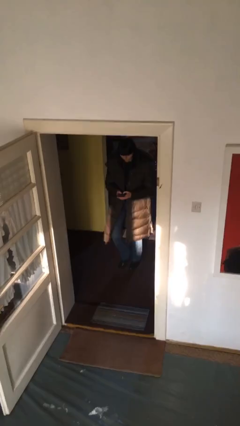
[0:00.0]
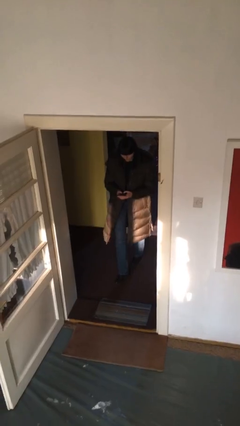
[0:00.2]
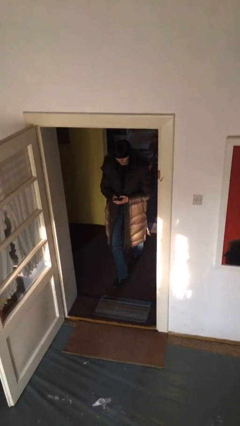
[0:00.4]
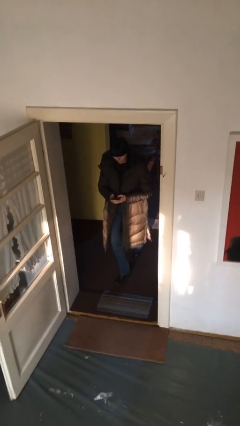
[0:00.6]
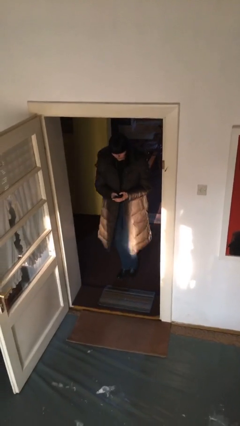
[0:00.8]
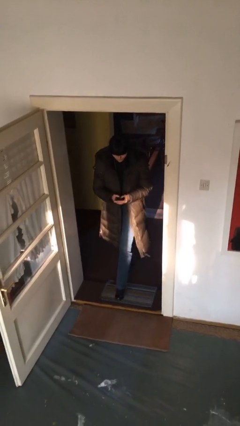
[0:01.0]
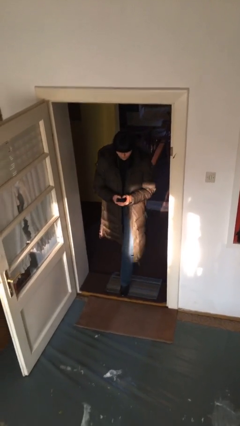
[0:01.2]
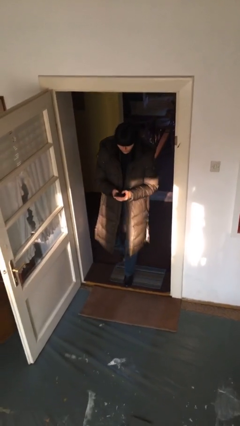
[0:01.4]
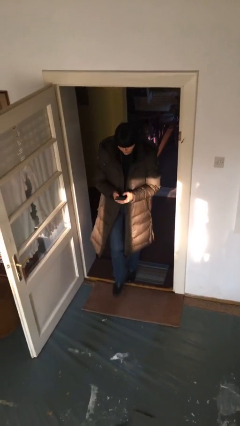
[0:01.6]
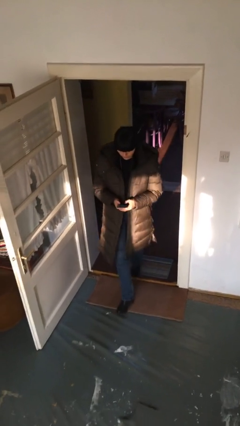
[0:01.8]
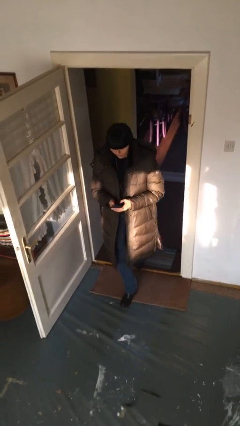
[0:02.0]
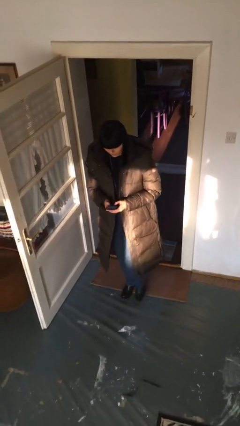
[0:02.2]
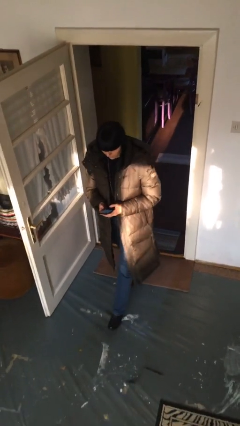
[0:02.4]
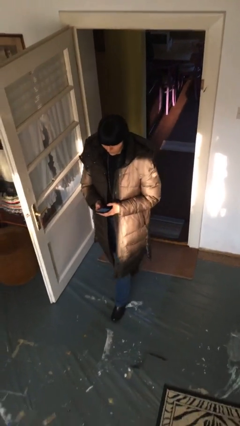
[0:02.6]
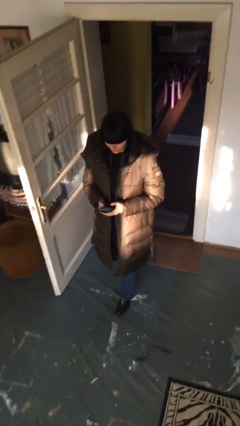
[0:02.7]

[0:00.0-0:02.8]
person enters scene through structure

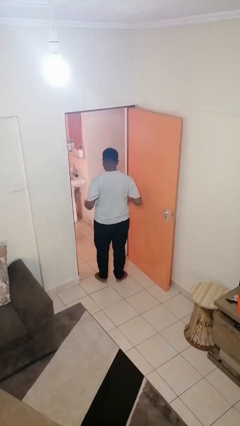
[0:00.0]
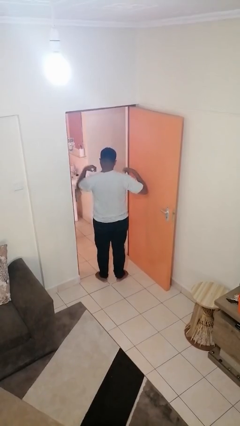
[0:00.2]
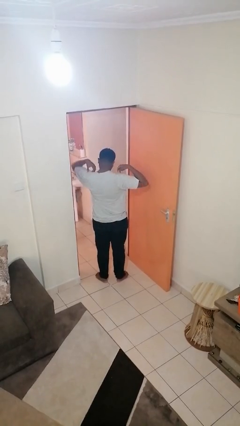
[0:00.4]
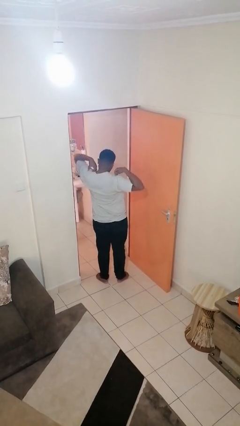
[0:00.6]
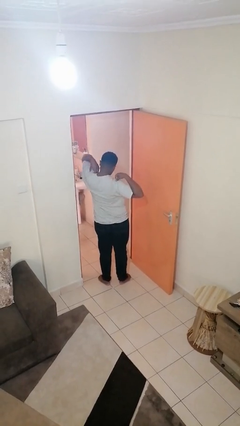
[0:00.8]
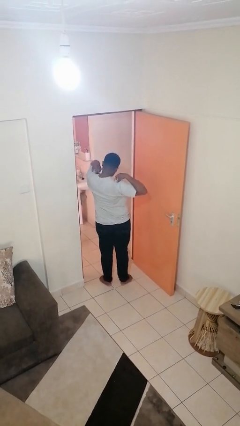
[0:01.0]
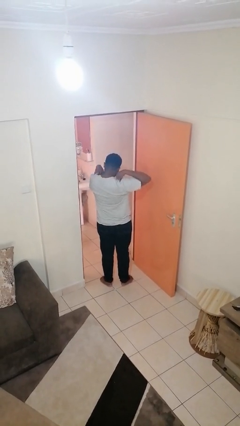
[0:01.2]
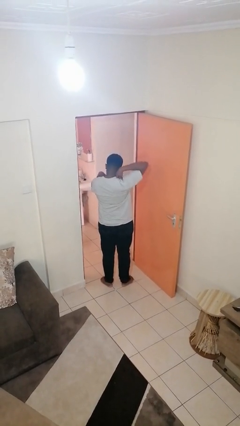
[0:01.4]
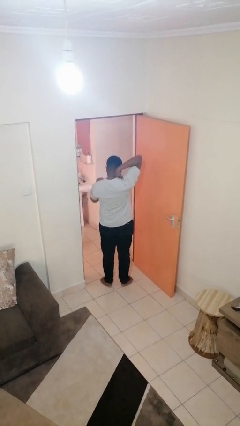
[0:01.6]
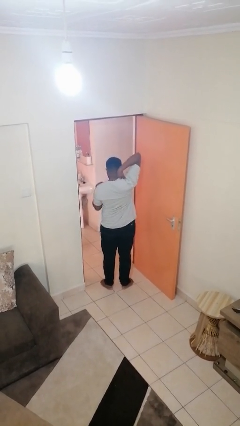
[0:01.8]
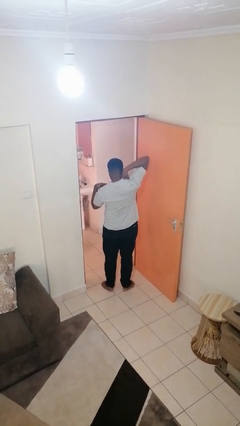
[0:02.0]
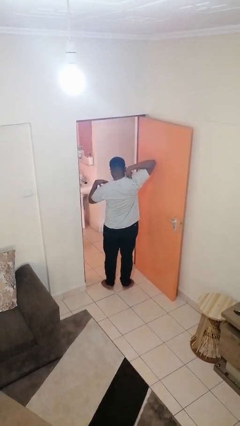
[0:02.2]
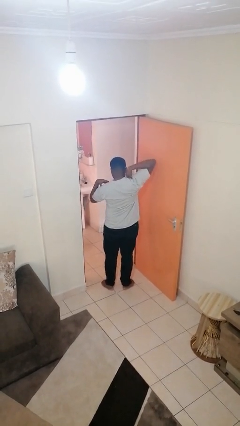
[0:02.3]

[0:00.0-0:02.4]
person stretches arms to side

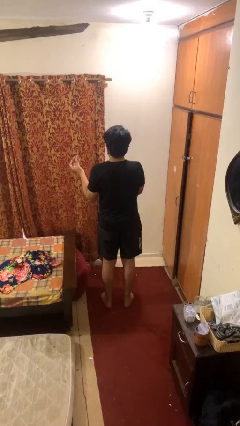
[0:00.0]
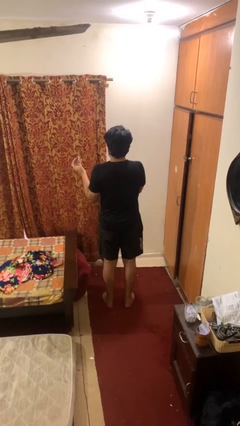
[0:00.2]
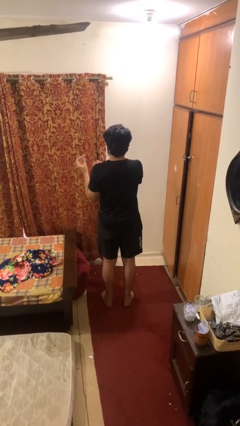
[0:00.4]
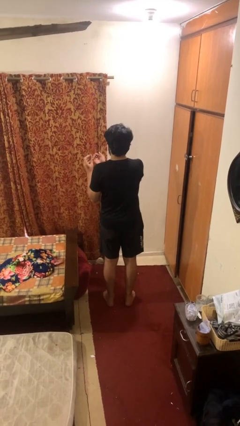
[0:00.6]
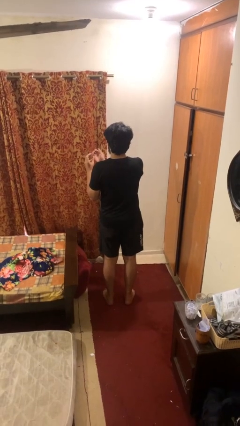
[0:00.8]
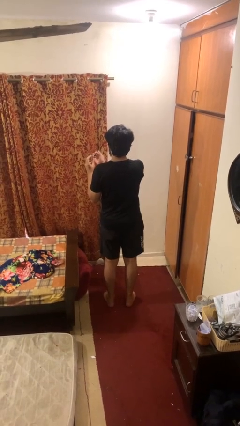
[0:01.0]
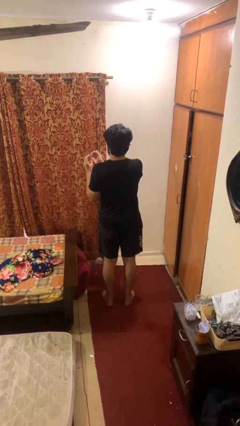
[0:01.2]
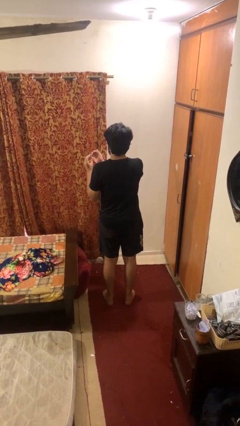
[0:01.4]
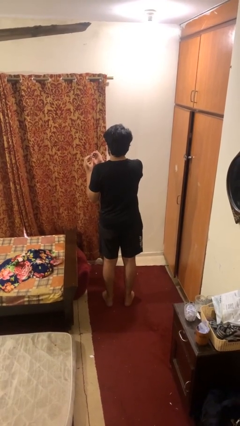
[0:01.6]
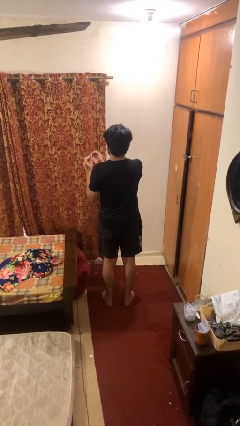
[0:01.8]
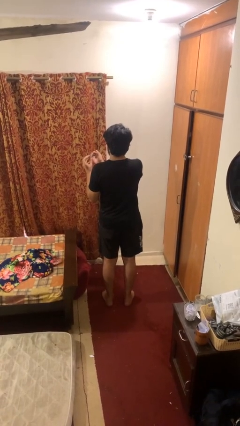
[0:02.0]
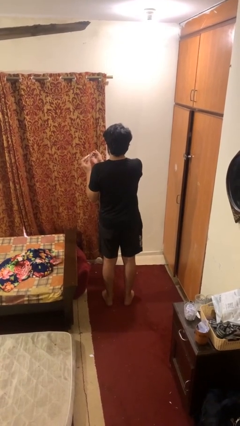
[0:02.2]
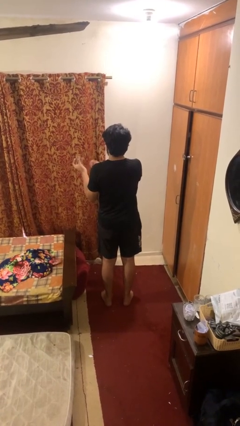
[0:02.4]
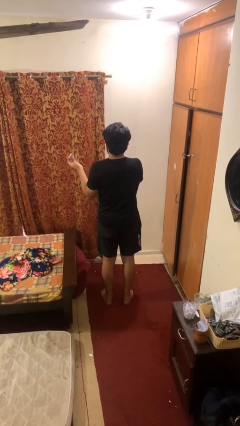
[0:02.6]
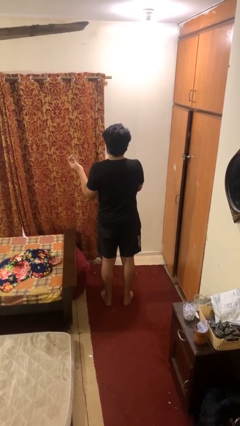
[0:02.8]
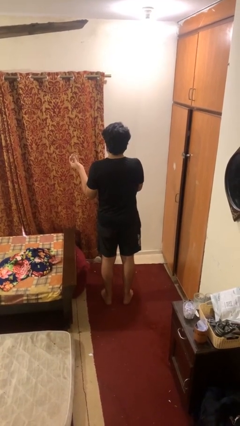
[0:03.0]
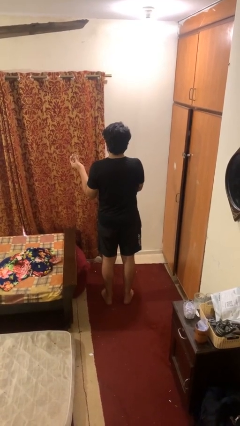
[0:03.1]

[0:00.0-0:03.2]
person clips fingernails

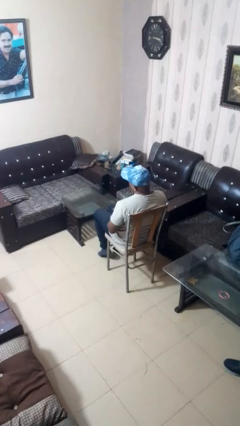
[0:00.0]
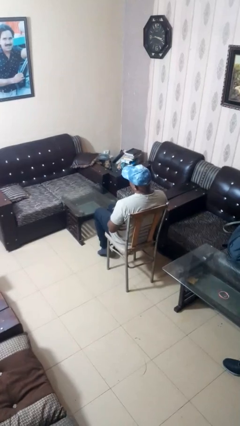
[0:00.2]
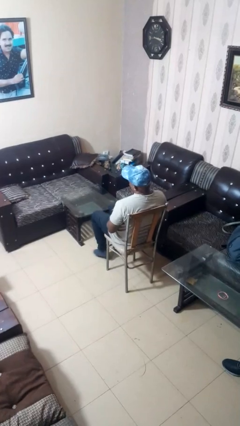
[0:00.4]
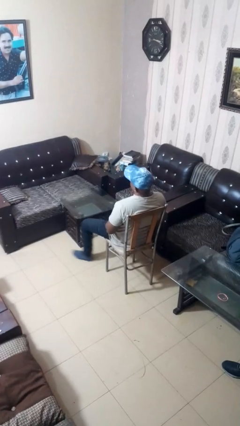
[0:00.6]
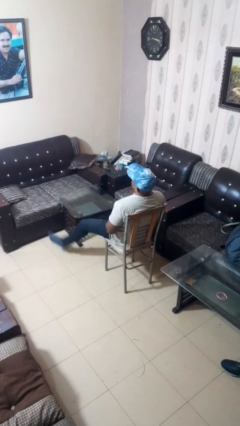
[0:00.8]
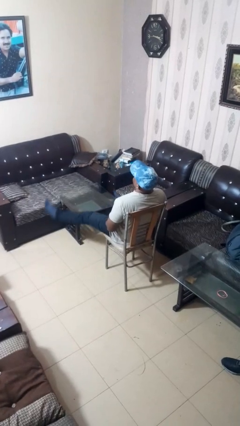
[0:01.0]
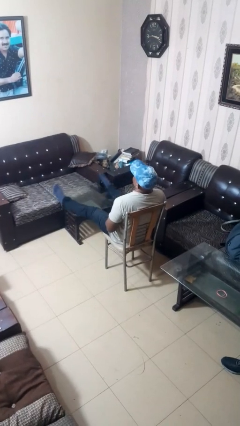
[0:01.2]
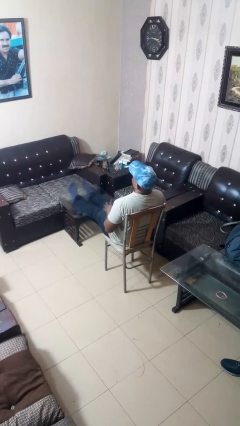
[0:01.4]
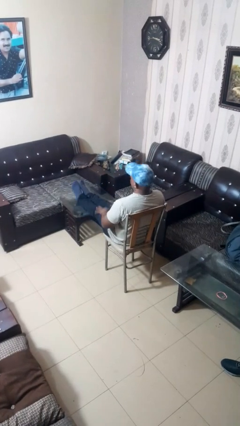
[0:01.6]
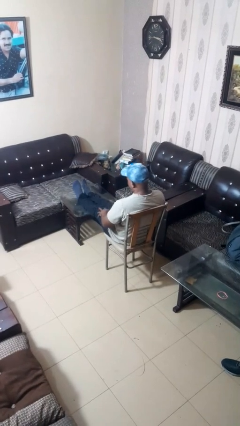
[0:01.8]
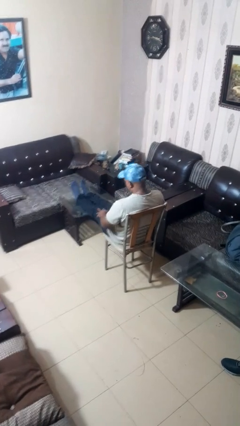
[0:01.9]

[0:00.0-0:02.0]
person puts feet up

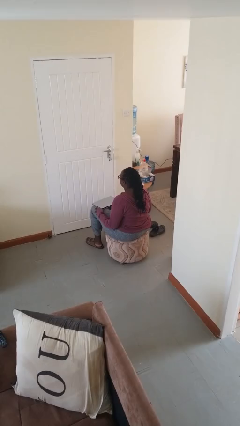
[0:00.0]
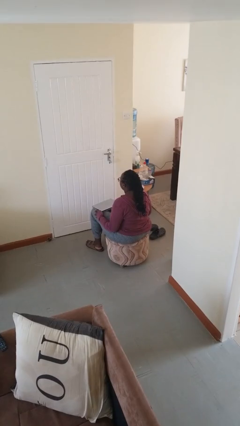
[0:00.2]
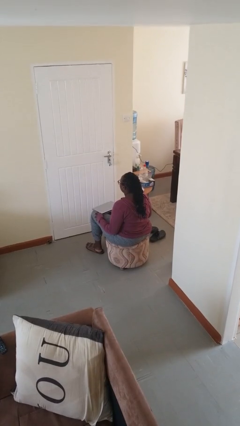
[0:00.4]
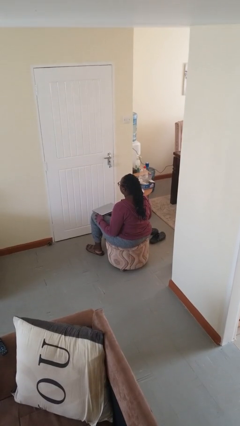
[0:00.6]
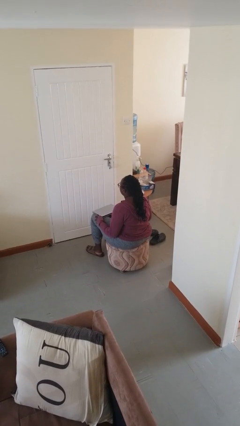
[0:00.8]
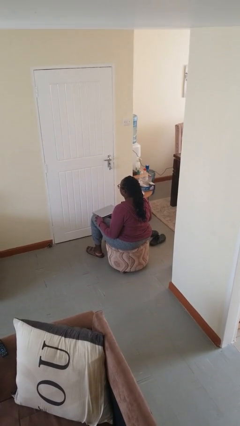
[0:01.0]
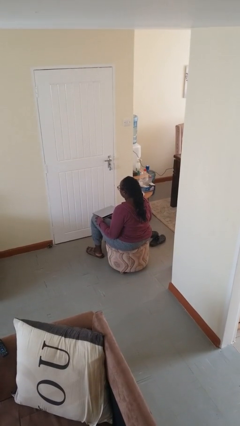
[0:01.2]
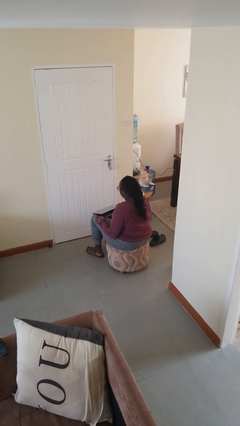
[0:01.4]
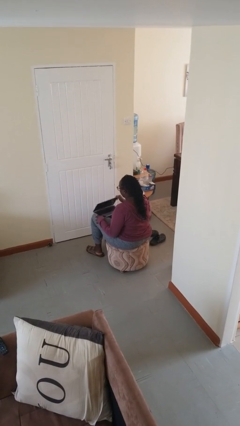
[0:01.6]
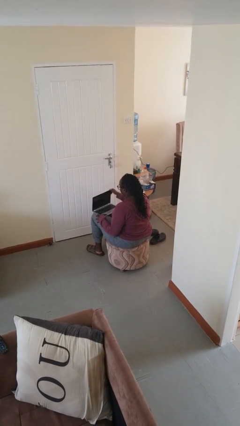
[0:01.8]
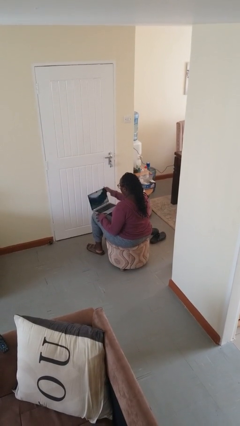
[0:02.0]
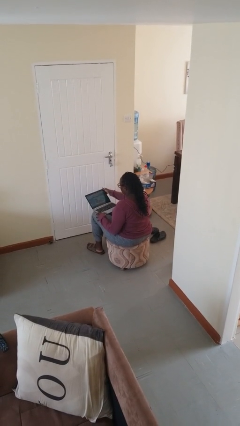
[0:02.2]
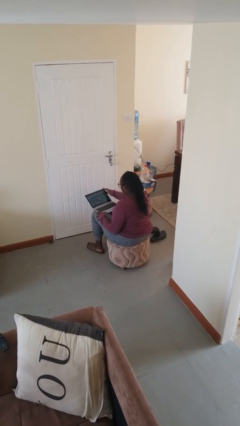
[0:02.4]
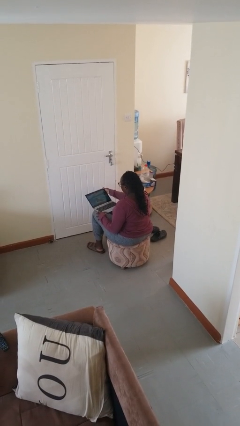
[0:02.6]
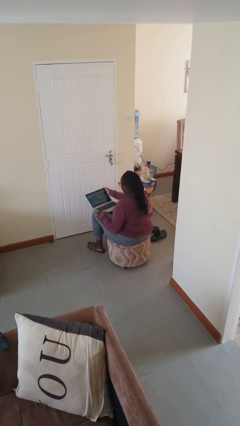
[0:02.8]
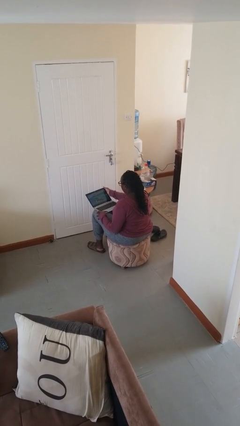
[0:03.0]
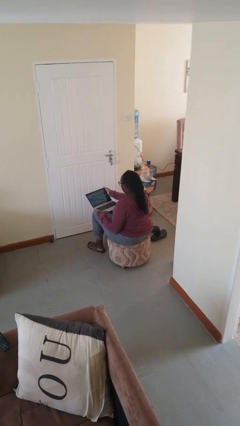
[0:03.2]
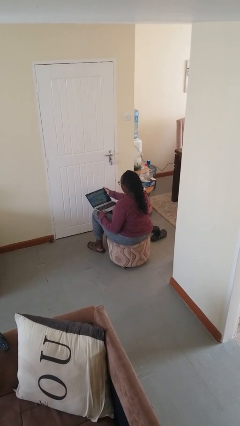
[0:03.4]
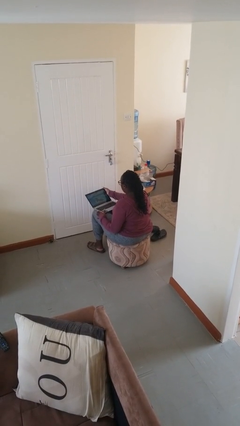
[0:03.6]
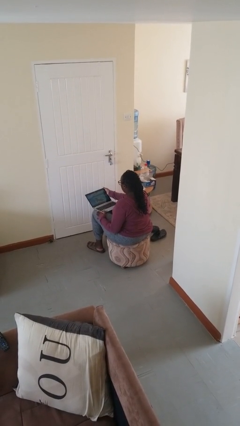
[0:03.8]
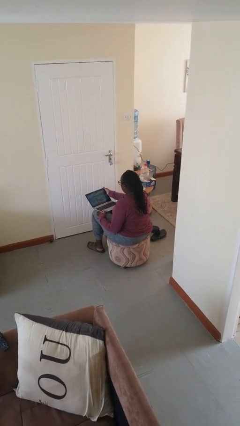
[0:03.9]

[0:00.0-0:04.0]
person opens laptop

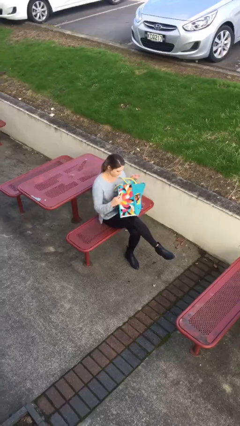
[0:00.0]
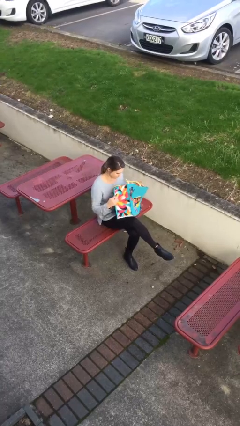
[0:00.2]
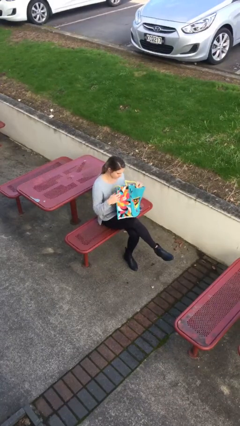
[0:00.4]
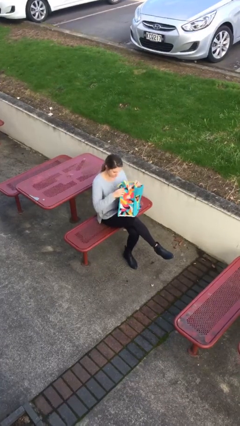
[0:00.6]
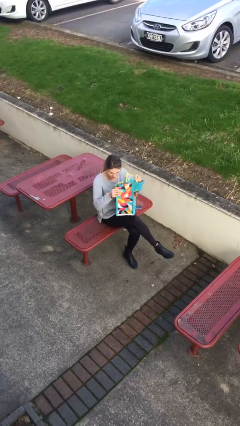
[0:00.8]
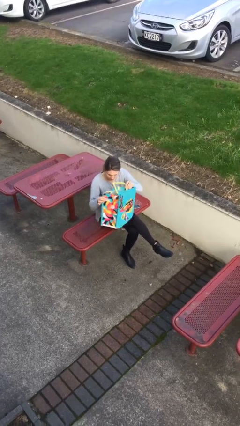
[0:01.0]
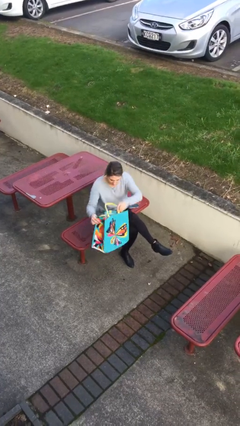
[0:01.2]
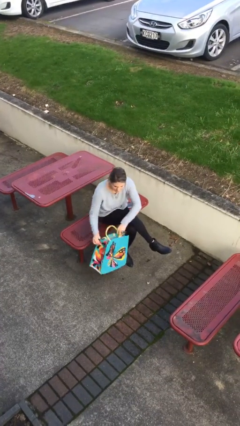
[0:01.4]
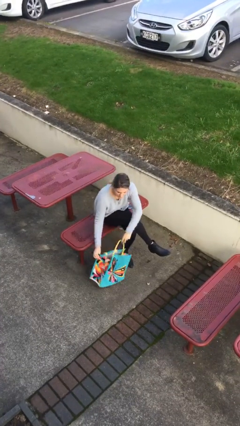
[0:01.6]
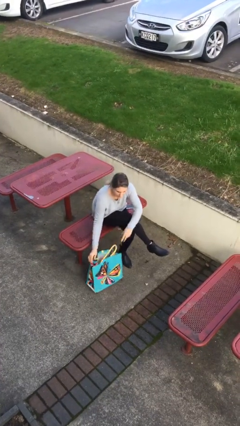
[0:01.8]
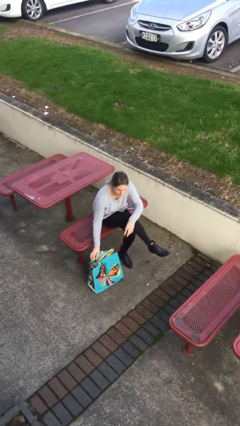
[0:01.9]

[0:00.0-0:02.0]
person puts down object on floor

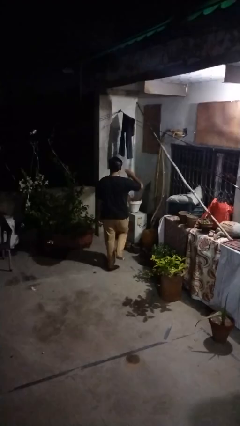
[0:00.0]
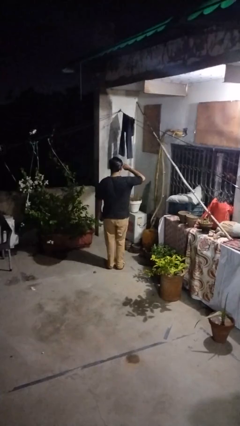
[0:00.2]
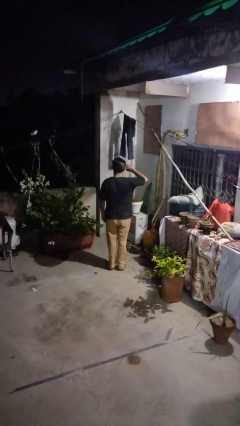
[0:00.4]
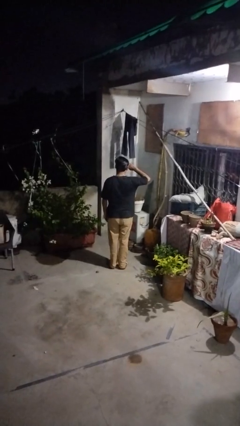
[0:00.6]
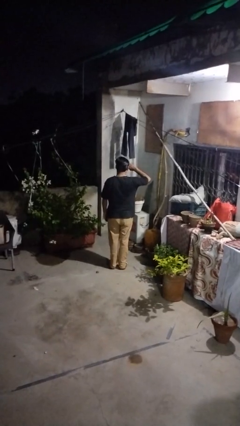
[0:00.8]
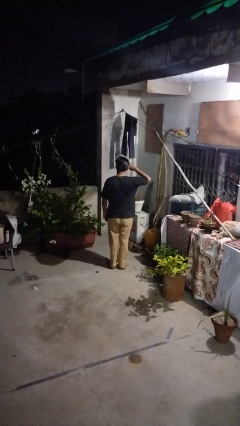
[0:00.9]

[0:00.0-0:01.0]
person salutes
